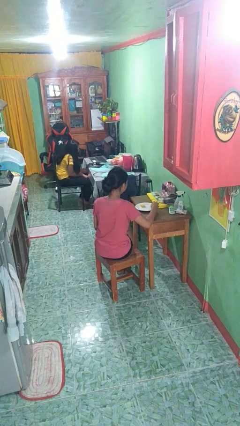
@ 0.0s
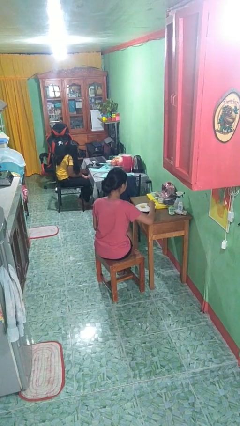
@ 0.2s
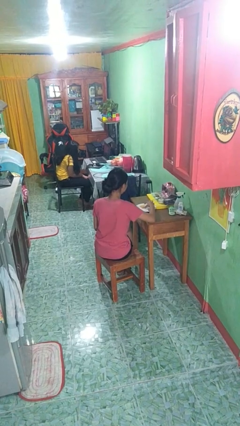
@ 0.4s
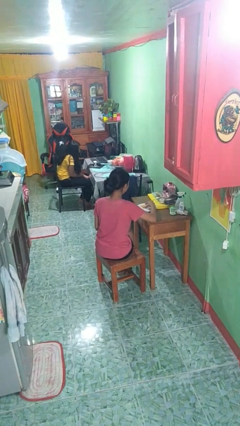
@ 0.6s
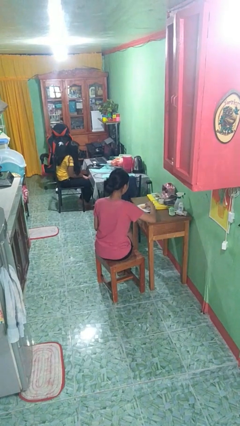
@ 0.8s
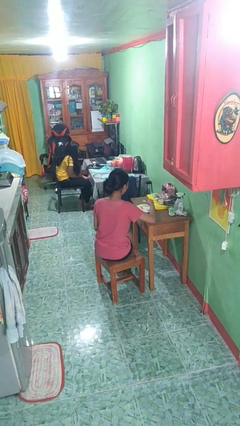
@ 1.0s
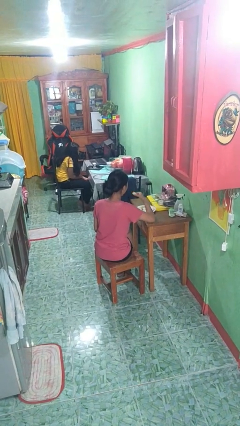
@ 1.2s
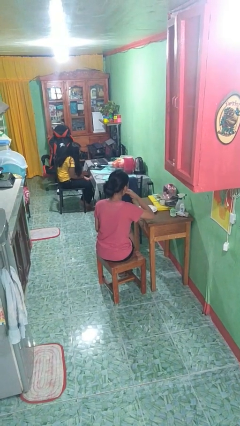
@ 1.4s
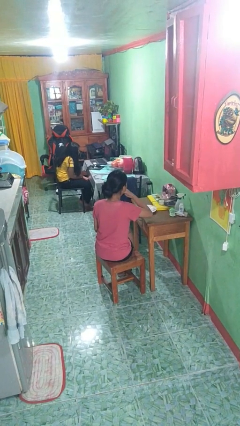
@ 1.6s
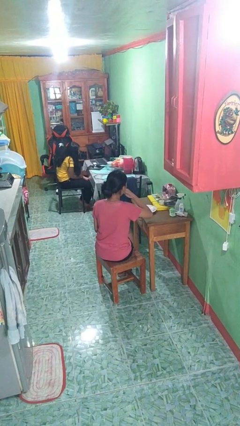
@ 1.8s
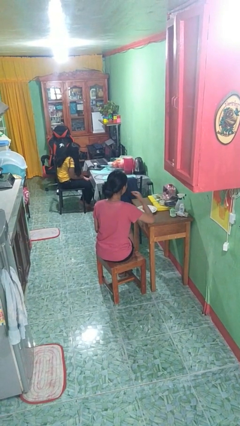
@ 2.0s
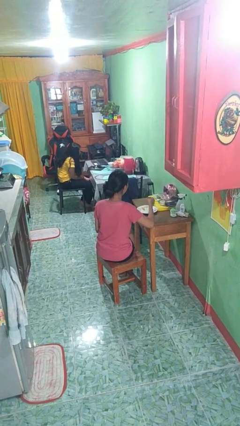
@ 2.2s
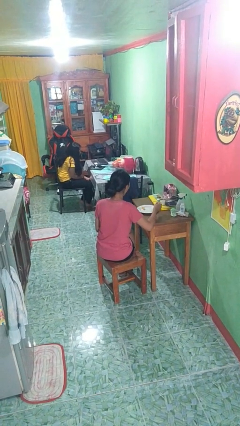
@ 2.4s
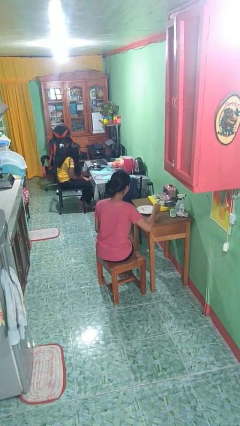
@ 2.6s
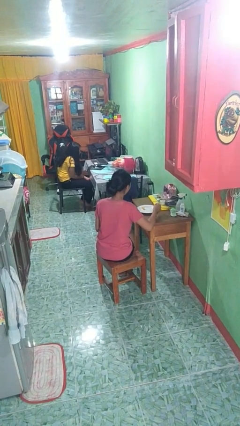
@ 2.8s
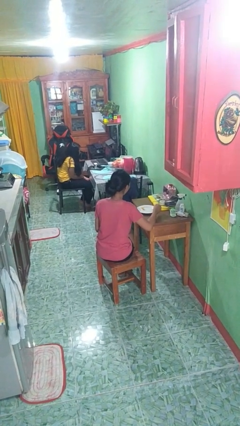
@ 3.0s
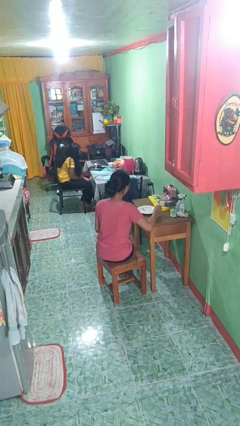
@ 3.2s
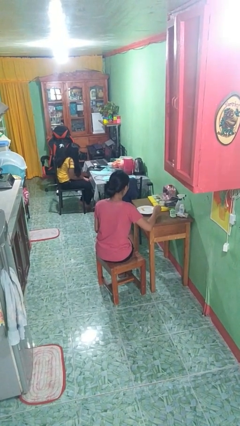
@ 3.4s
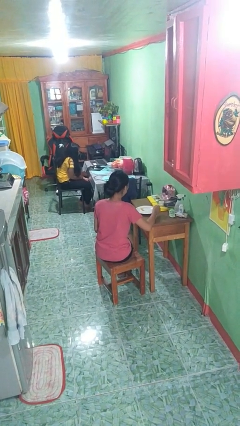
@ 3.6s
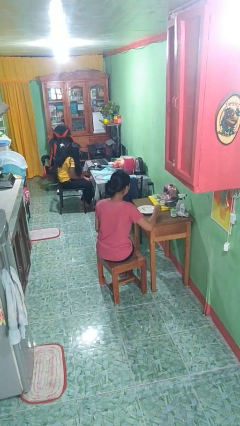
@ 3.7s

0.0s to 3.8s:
person eats with hands

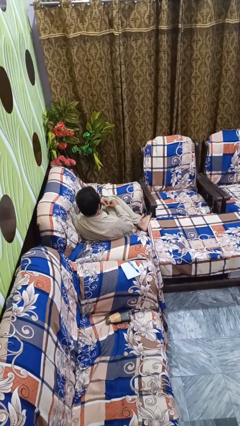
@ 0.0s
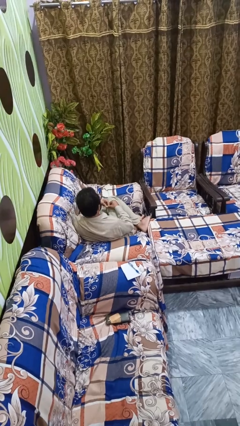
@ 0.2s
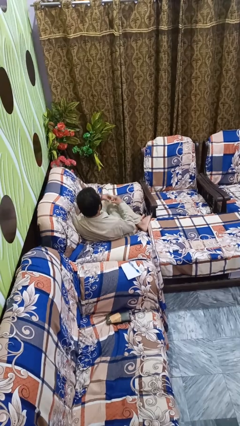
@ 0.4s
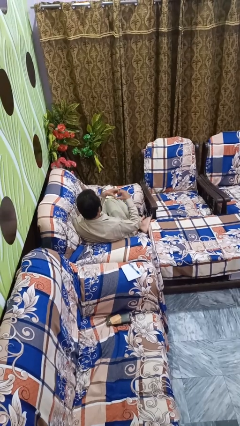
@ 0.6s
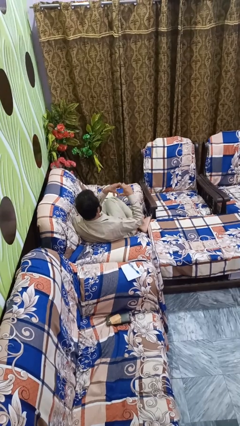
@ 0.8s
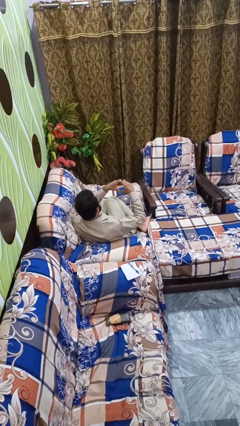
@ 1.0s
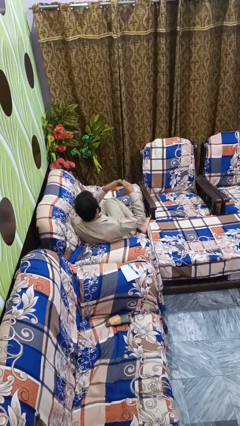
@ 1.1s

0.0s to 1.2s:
person gestures heart

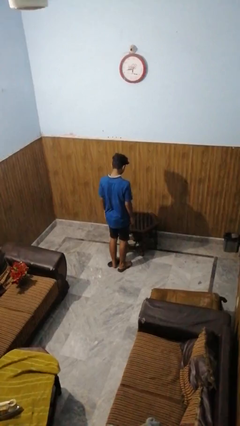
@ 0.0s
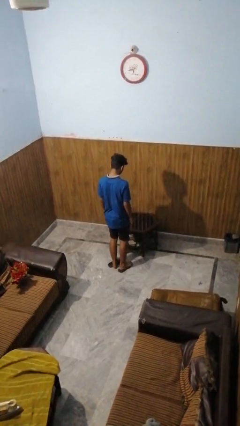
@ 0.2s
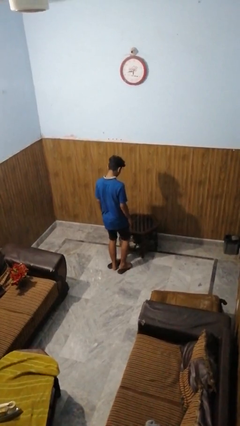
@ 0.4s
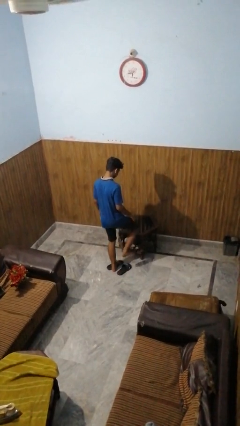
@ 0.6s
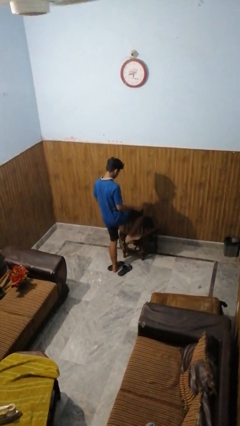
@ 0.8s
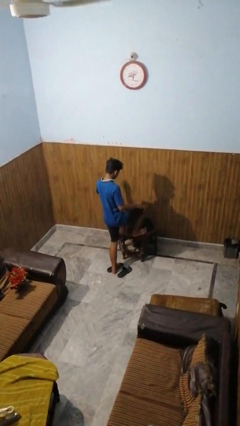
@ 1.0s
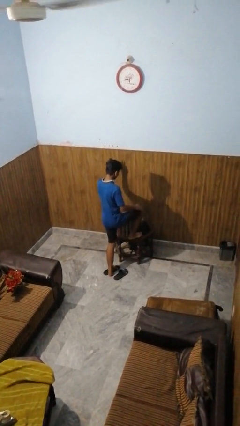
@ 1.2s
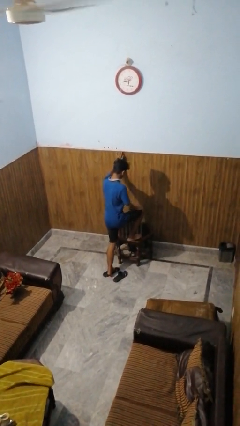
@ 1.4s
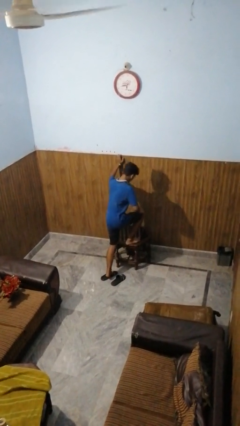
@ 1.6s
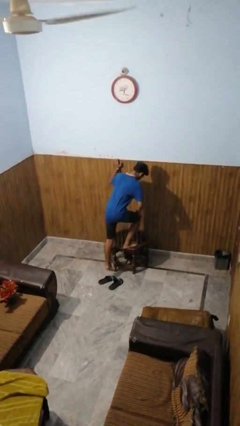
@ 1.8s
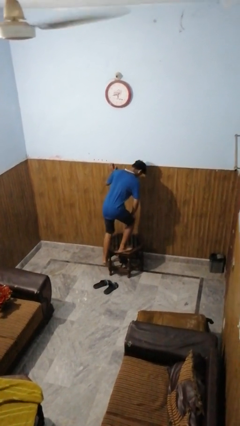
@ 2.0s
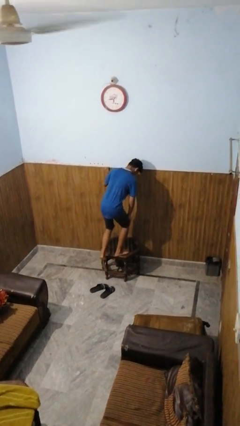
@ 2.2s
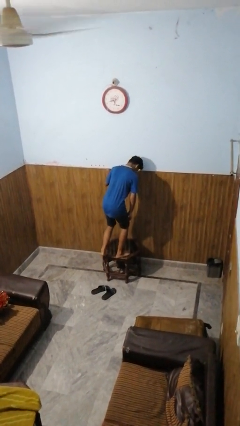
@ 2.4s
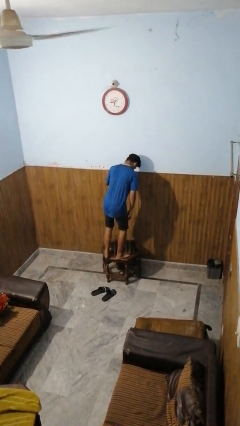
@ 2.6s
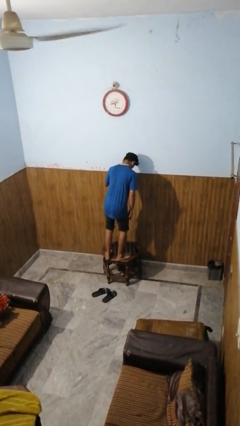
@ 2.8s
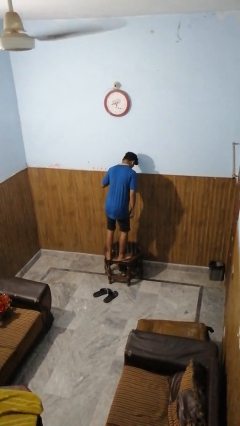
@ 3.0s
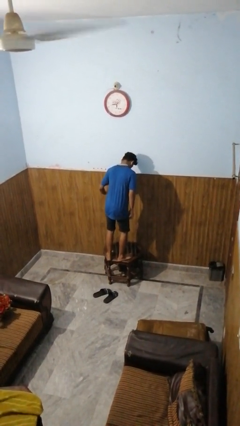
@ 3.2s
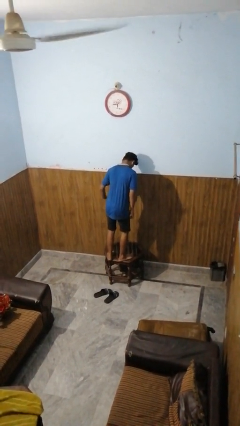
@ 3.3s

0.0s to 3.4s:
person climbs on table

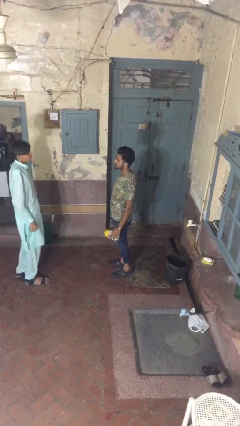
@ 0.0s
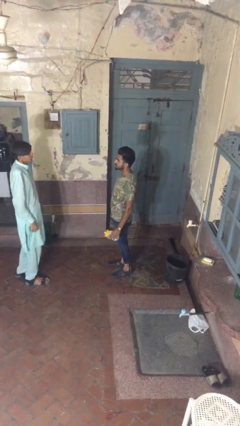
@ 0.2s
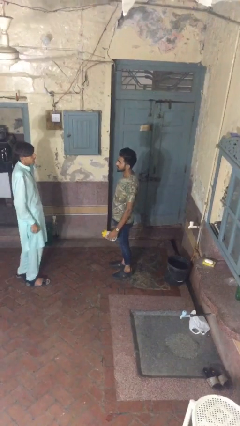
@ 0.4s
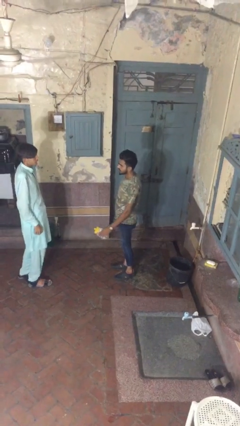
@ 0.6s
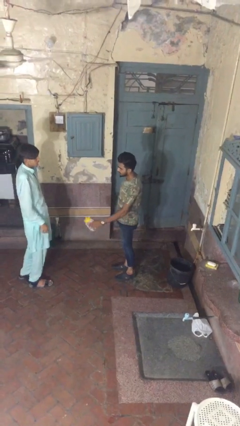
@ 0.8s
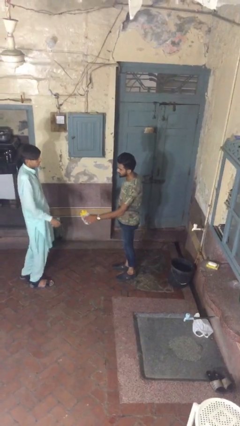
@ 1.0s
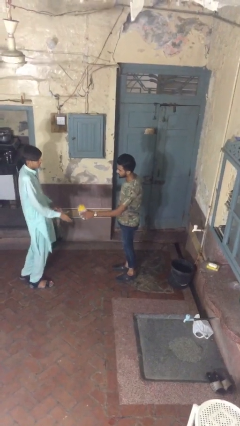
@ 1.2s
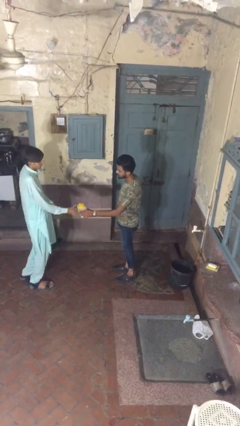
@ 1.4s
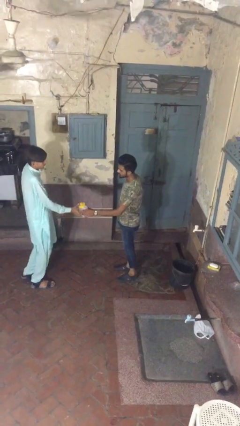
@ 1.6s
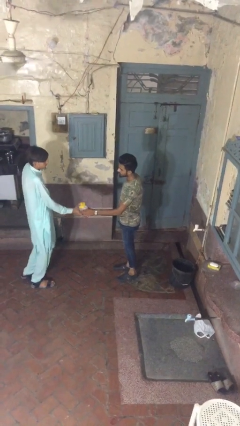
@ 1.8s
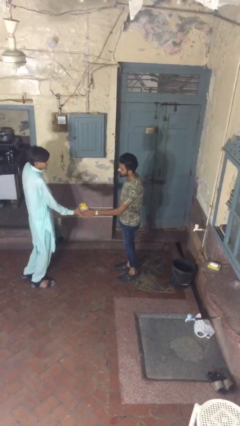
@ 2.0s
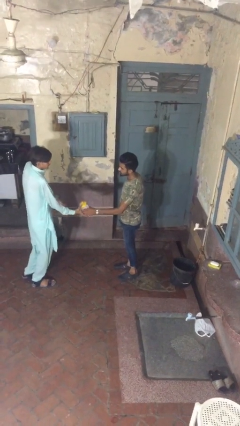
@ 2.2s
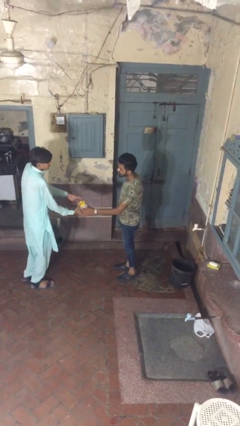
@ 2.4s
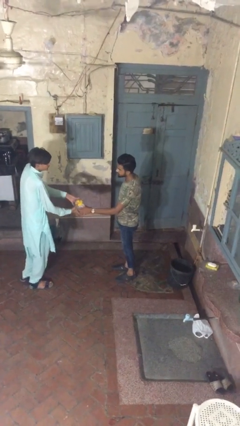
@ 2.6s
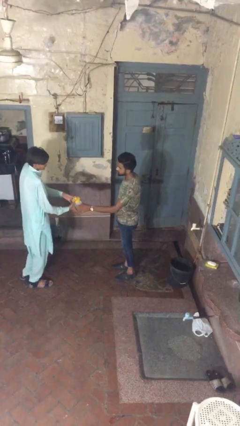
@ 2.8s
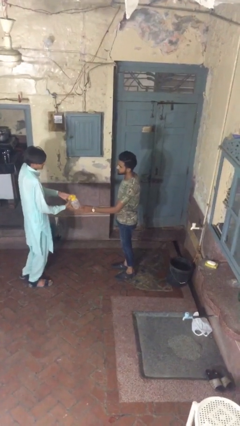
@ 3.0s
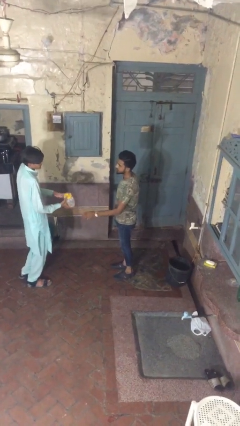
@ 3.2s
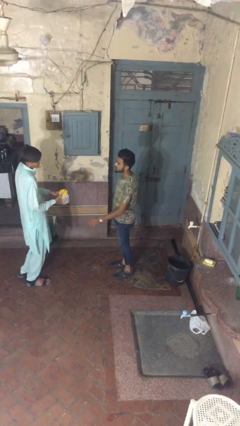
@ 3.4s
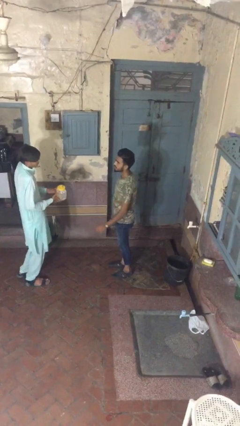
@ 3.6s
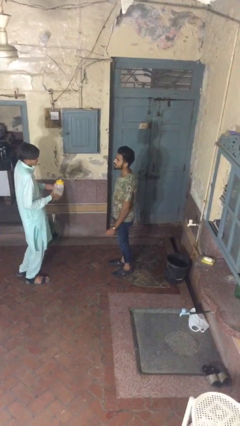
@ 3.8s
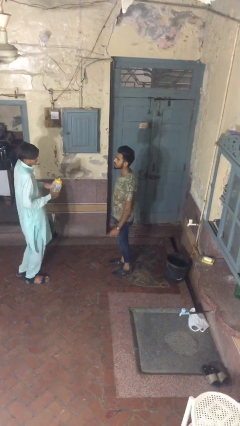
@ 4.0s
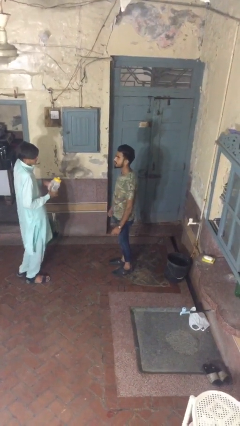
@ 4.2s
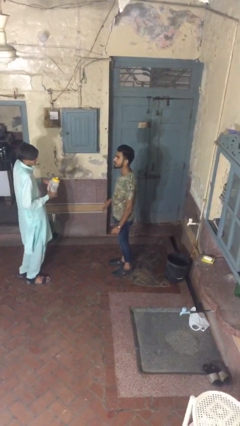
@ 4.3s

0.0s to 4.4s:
person transfers object to person

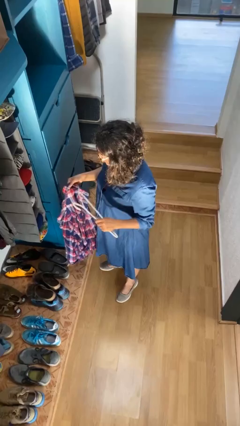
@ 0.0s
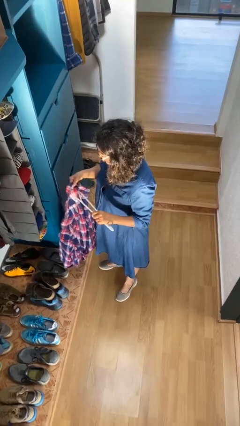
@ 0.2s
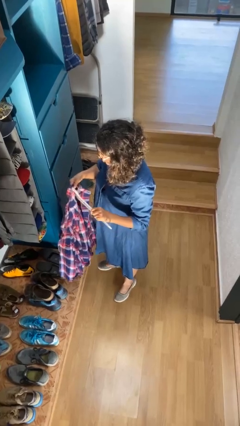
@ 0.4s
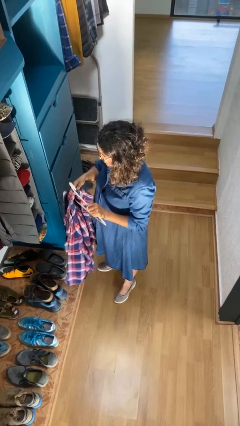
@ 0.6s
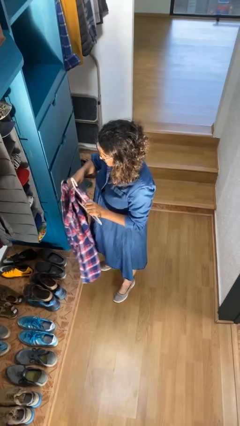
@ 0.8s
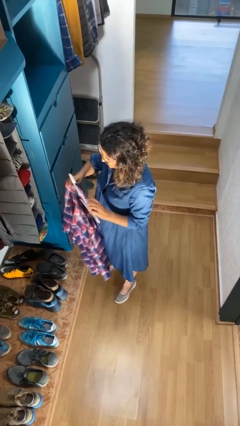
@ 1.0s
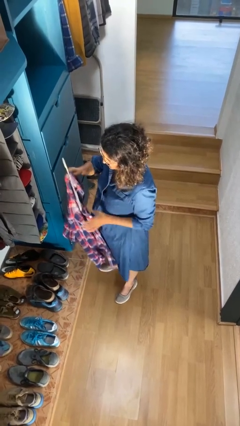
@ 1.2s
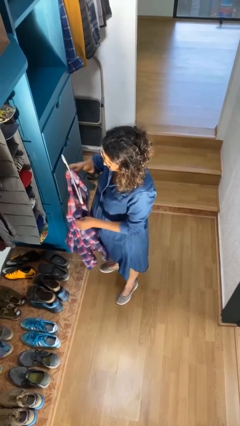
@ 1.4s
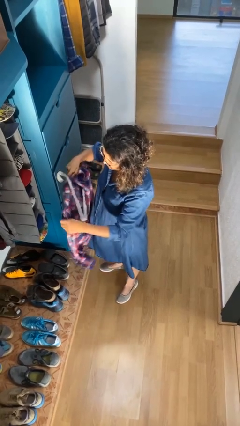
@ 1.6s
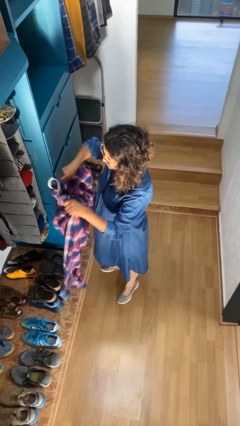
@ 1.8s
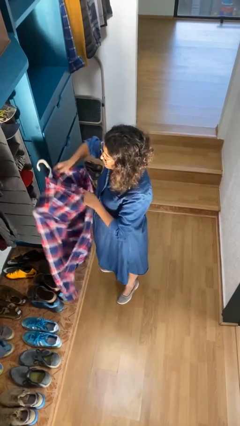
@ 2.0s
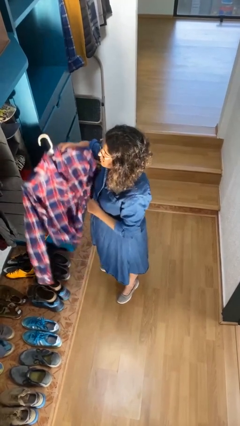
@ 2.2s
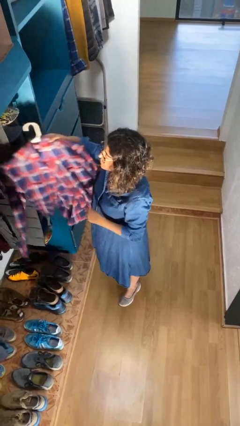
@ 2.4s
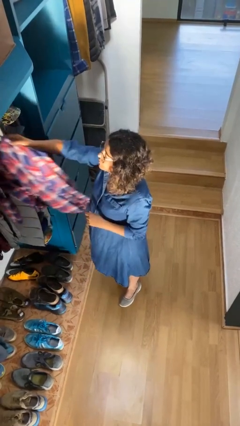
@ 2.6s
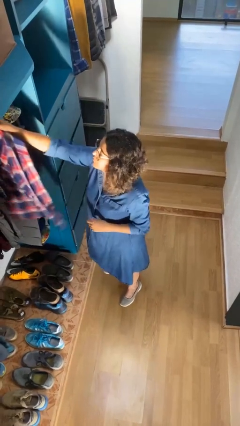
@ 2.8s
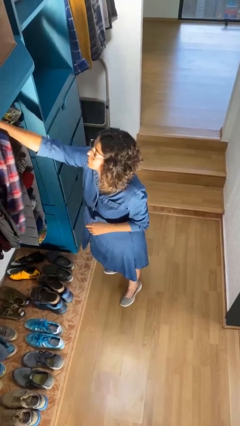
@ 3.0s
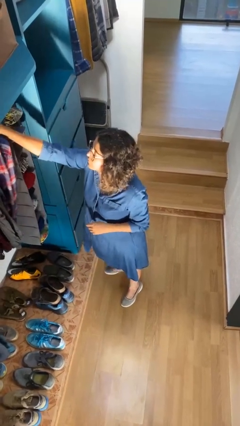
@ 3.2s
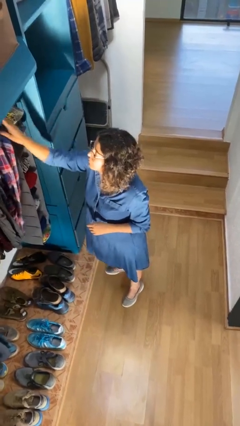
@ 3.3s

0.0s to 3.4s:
person puts clothes into closet

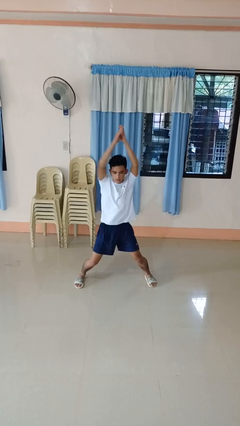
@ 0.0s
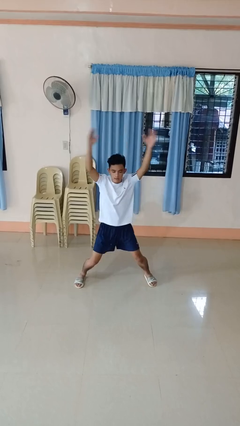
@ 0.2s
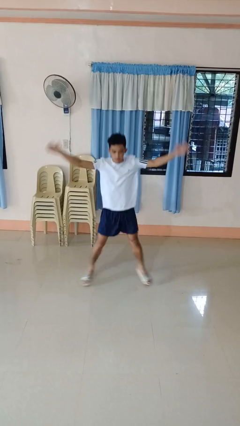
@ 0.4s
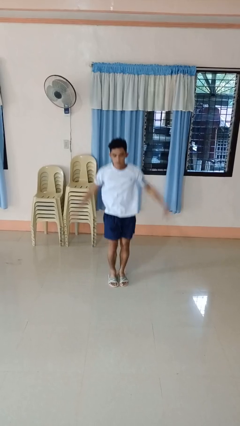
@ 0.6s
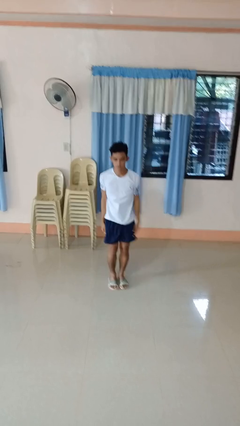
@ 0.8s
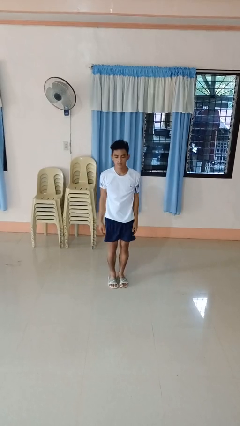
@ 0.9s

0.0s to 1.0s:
person exercises with jumping jacks
